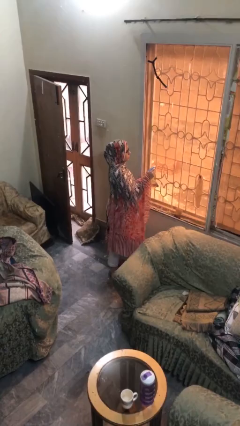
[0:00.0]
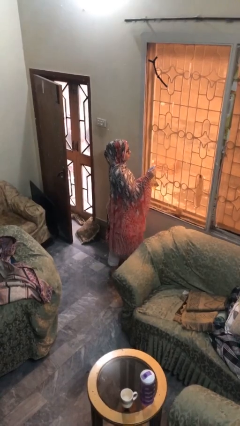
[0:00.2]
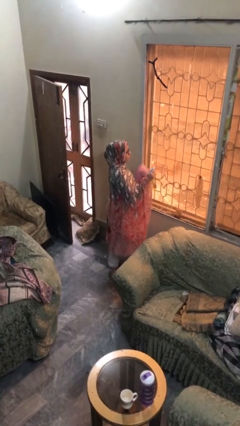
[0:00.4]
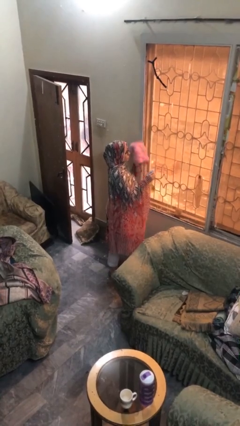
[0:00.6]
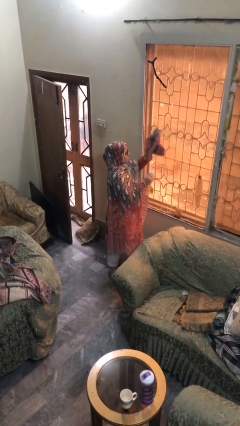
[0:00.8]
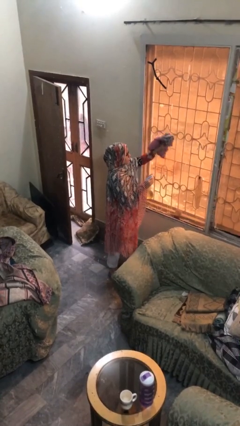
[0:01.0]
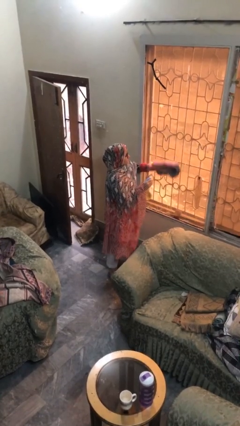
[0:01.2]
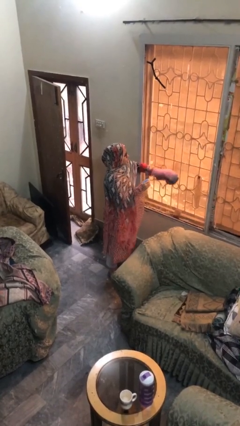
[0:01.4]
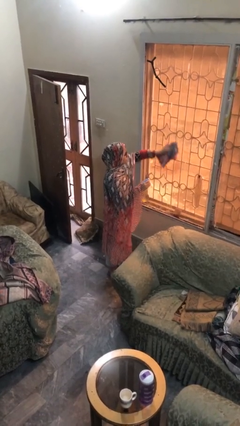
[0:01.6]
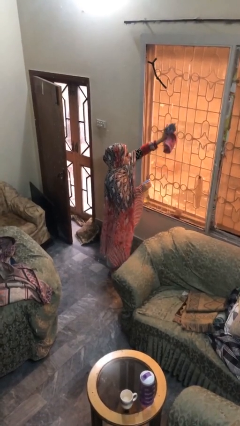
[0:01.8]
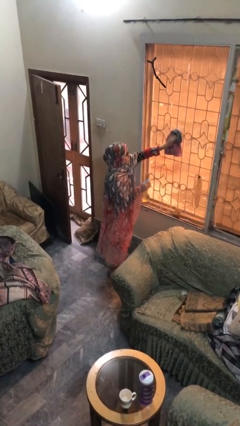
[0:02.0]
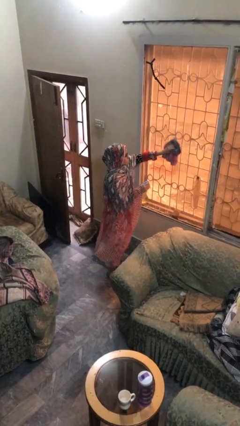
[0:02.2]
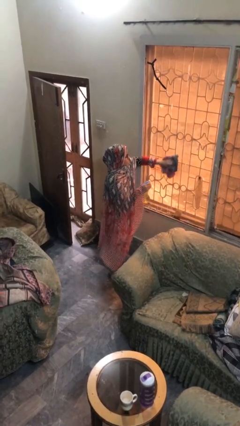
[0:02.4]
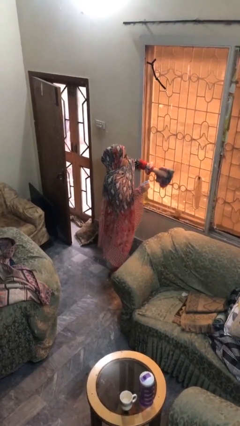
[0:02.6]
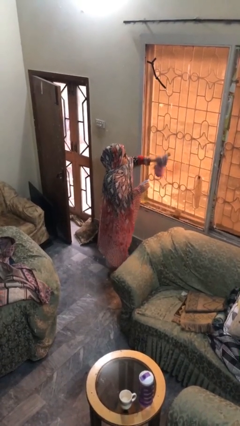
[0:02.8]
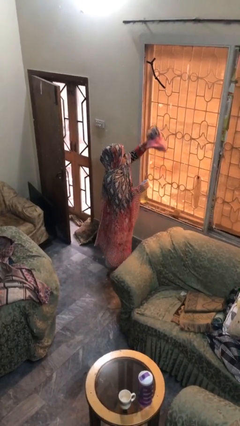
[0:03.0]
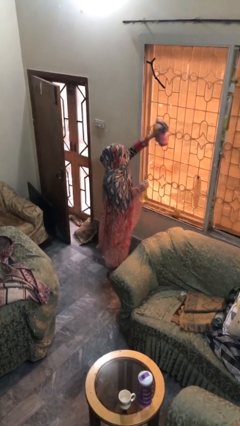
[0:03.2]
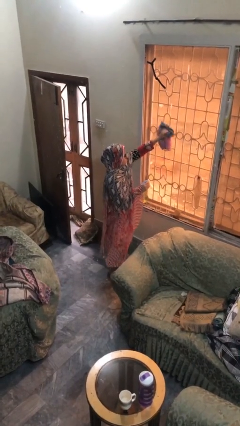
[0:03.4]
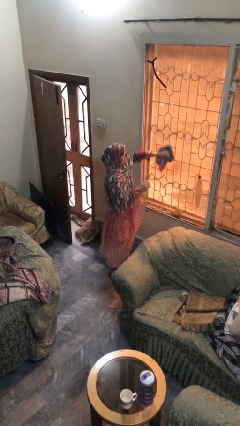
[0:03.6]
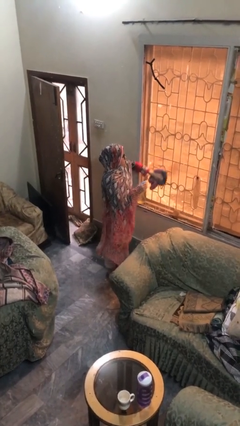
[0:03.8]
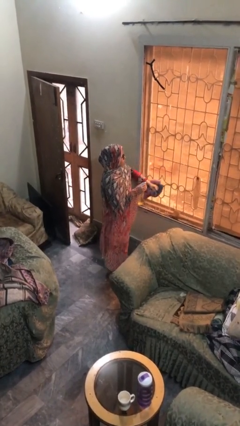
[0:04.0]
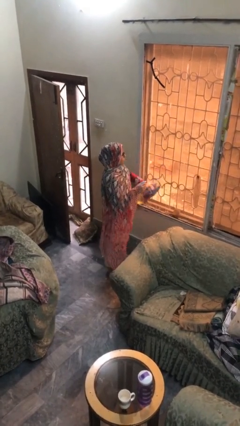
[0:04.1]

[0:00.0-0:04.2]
person washes window

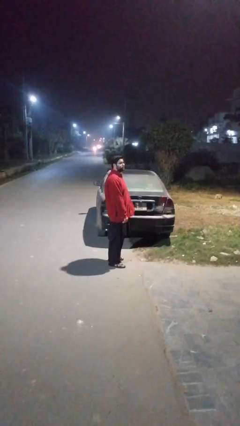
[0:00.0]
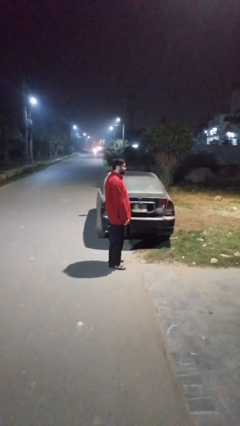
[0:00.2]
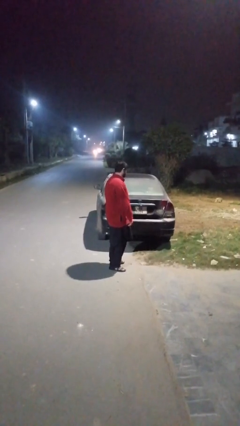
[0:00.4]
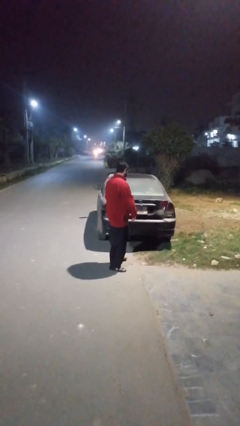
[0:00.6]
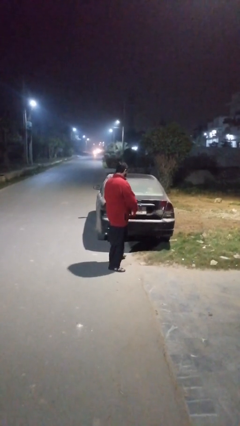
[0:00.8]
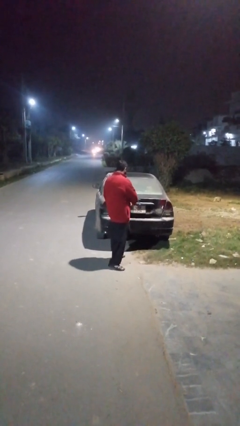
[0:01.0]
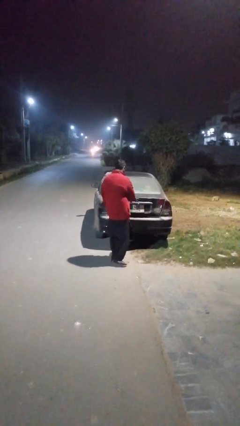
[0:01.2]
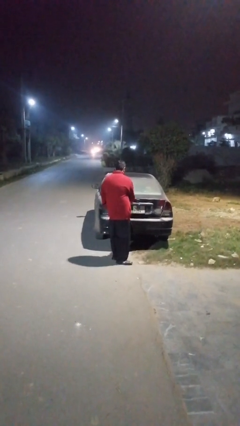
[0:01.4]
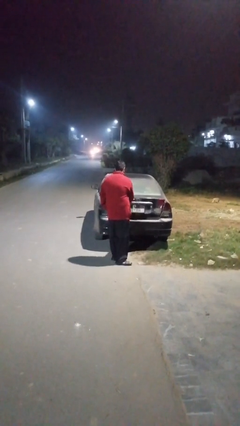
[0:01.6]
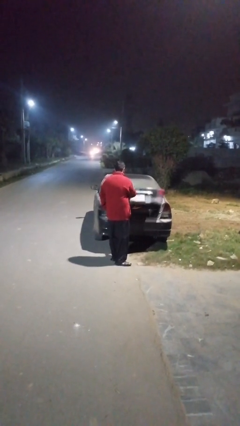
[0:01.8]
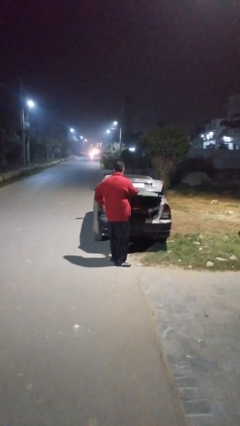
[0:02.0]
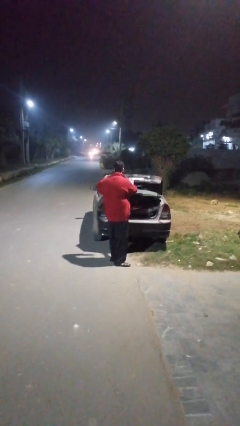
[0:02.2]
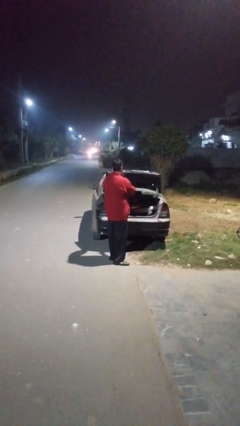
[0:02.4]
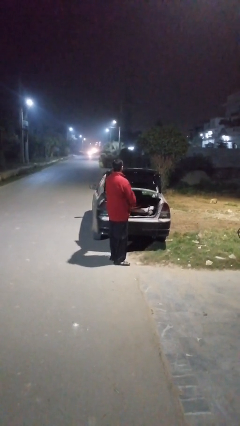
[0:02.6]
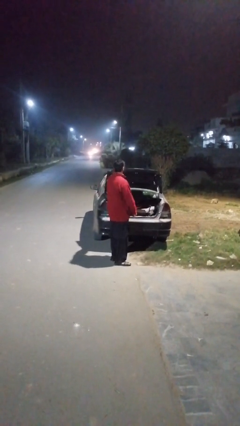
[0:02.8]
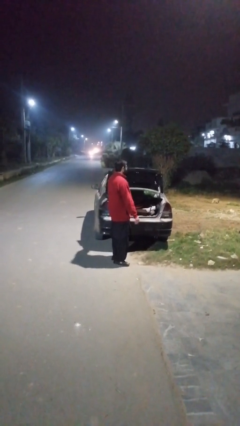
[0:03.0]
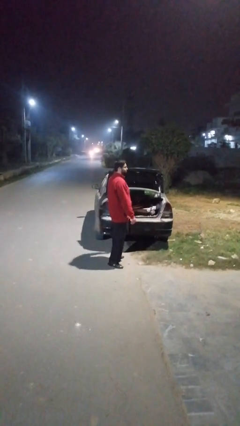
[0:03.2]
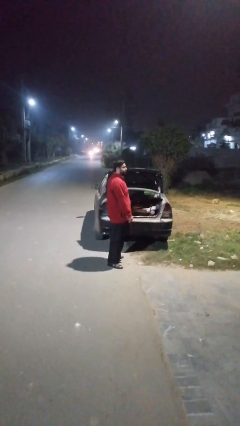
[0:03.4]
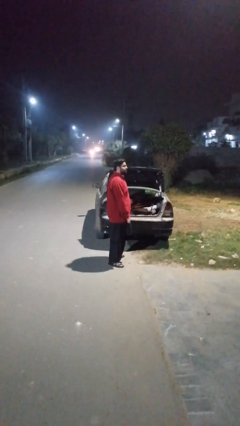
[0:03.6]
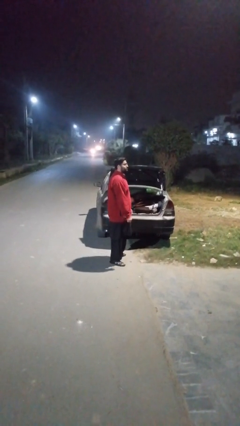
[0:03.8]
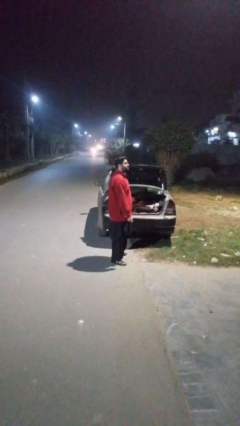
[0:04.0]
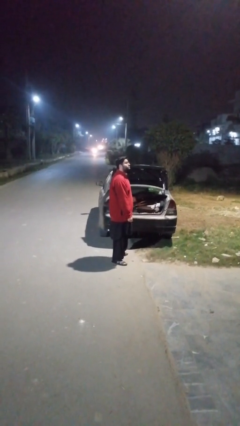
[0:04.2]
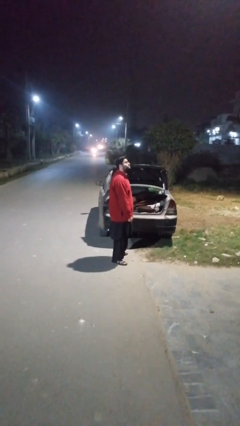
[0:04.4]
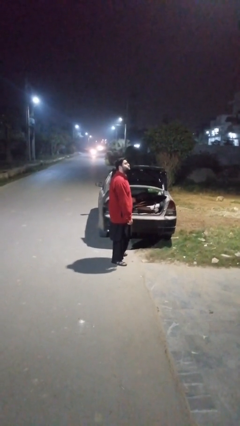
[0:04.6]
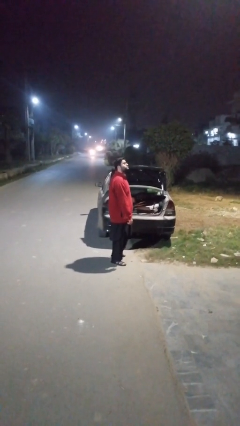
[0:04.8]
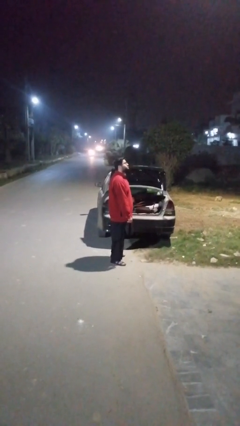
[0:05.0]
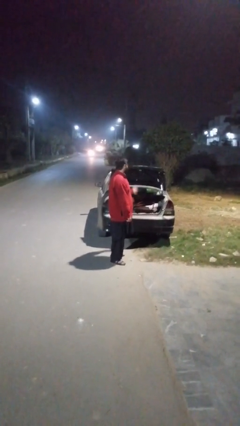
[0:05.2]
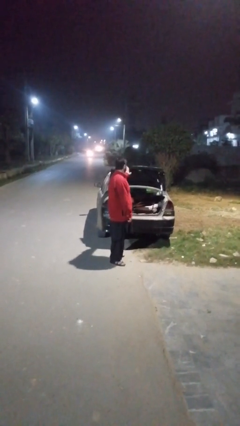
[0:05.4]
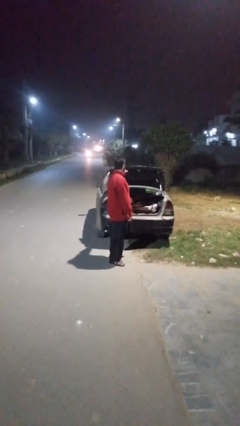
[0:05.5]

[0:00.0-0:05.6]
person opens car trunk

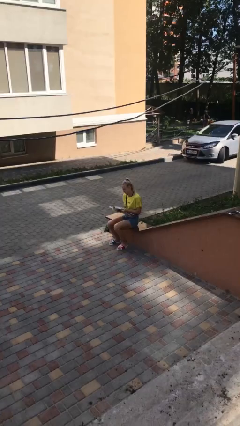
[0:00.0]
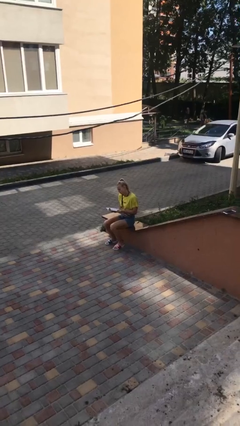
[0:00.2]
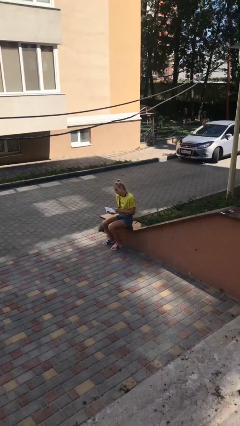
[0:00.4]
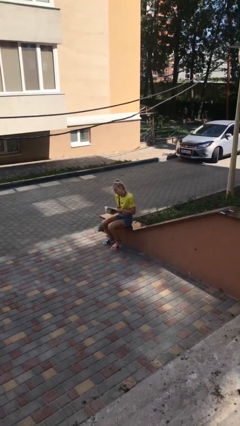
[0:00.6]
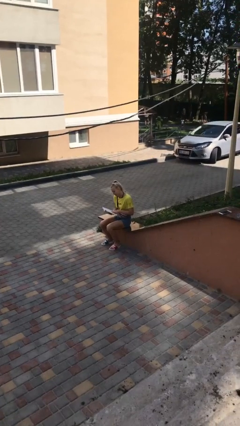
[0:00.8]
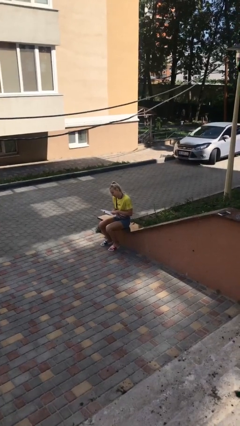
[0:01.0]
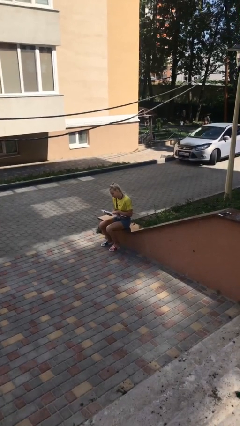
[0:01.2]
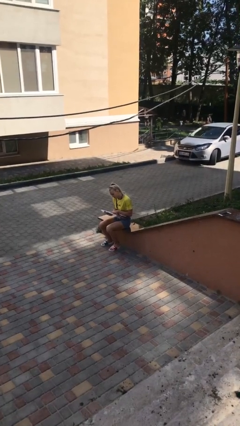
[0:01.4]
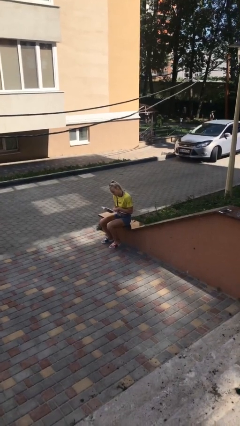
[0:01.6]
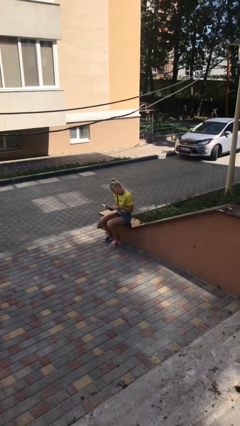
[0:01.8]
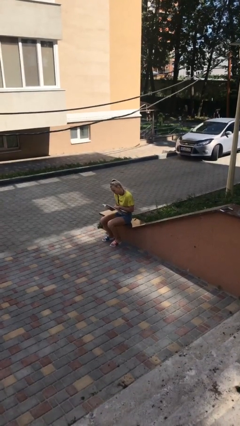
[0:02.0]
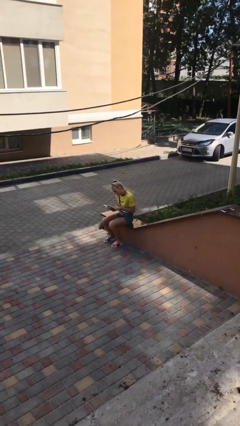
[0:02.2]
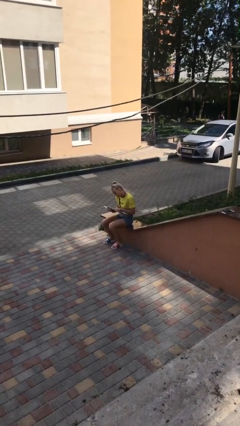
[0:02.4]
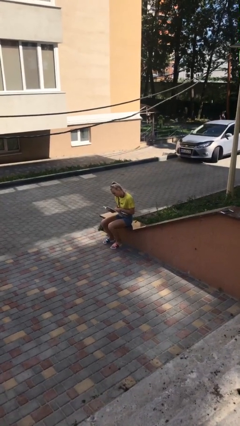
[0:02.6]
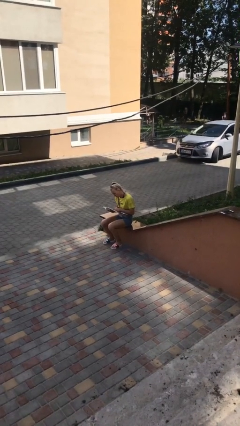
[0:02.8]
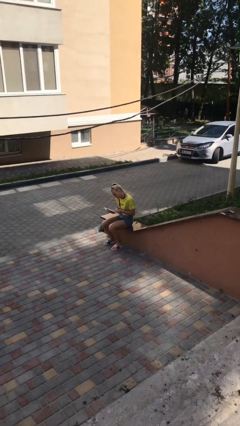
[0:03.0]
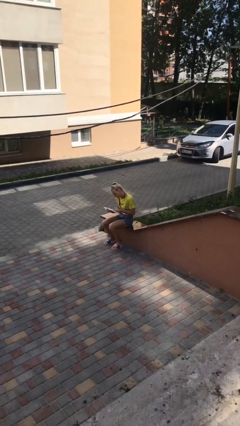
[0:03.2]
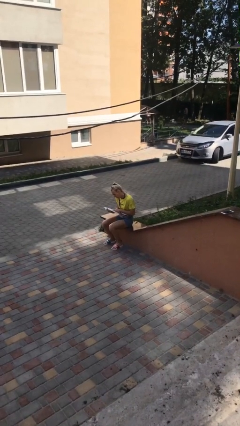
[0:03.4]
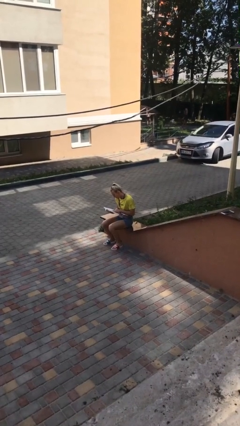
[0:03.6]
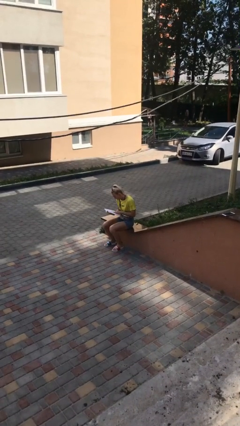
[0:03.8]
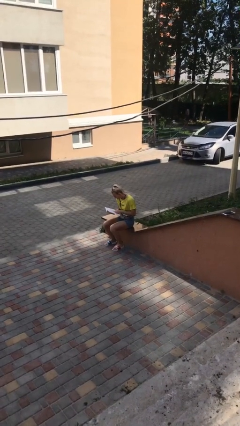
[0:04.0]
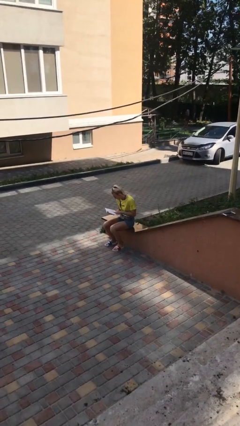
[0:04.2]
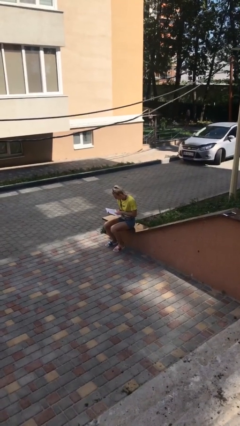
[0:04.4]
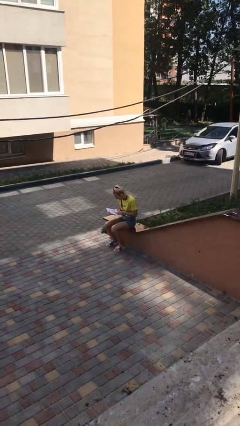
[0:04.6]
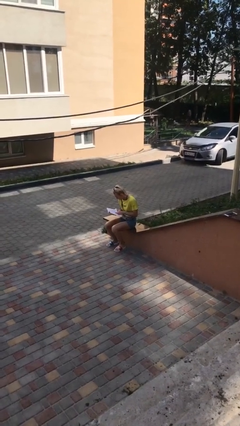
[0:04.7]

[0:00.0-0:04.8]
person reads document

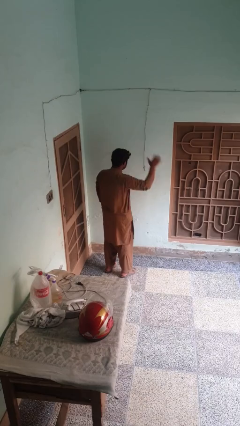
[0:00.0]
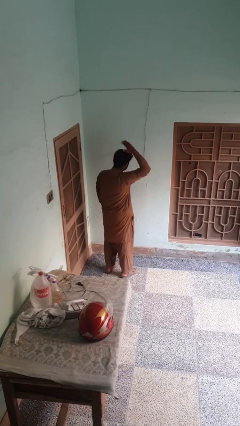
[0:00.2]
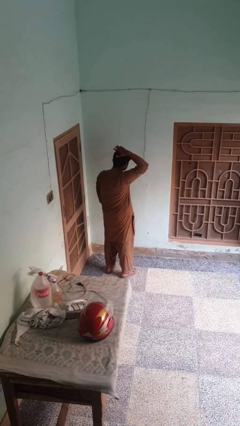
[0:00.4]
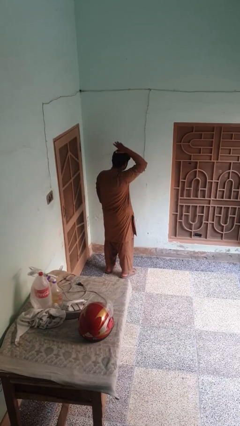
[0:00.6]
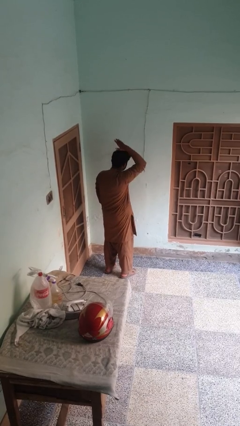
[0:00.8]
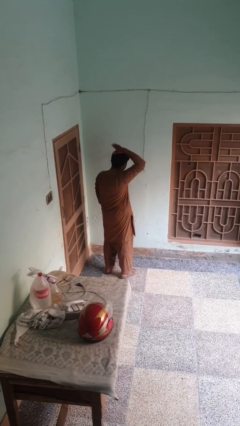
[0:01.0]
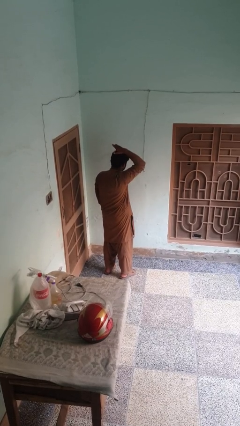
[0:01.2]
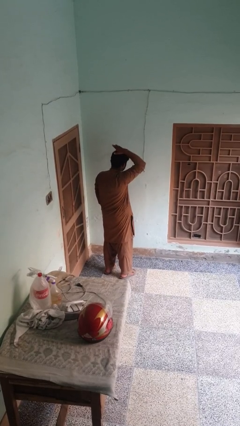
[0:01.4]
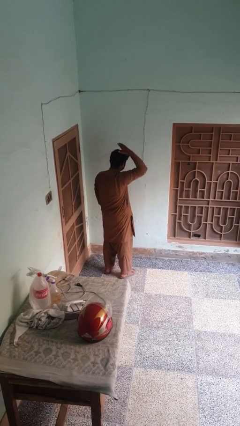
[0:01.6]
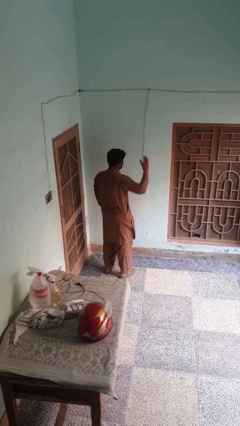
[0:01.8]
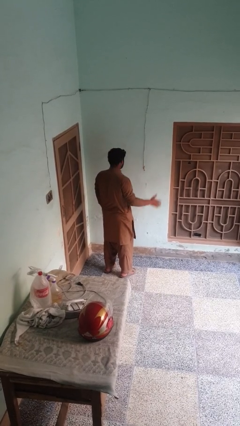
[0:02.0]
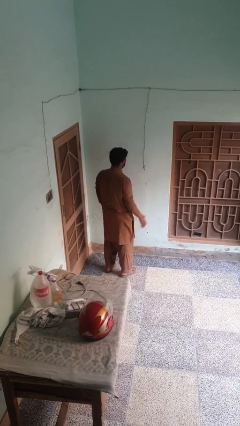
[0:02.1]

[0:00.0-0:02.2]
person pats head

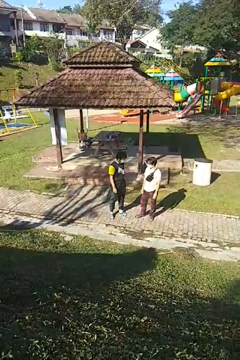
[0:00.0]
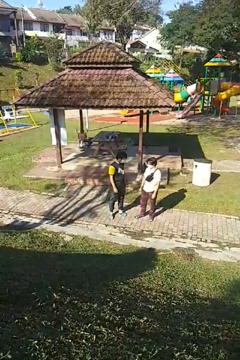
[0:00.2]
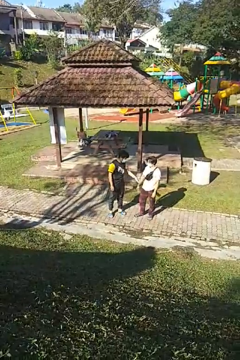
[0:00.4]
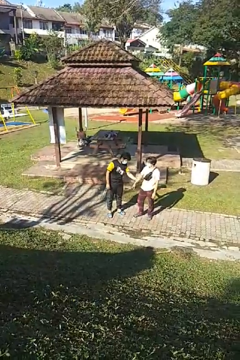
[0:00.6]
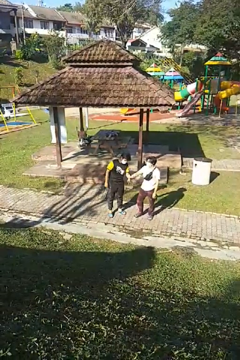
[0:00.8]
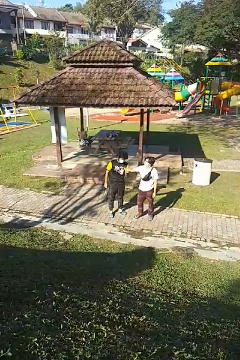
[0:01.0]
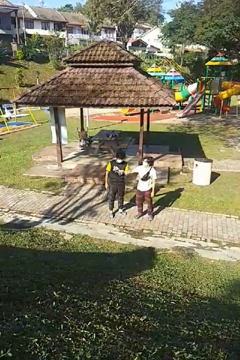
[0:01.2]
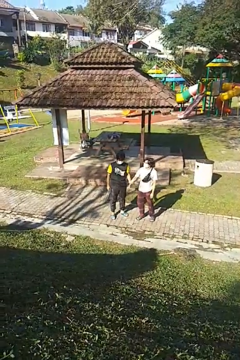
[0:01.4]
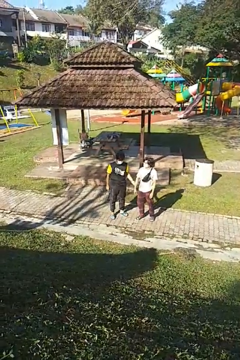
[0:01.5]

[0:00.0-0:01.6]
person grabs person by forearm
